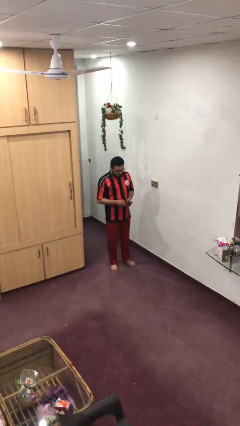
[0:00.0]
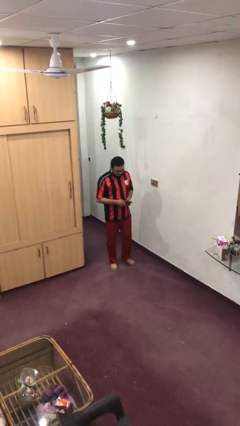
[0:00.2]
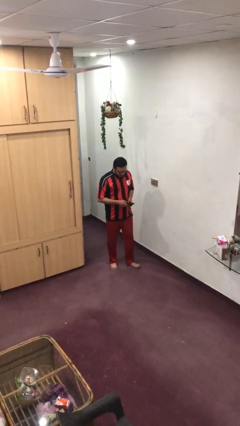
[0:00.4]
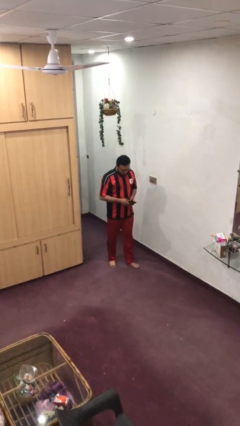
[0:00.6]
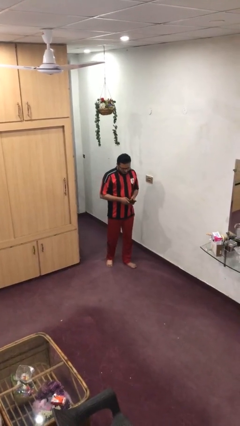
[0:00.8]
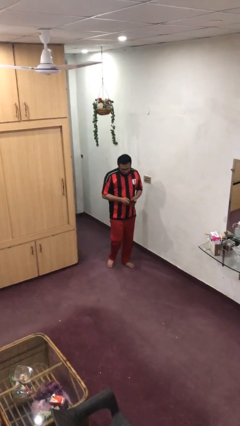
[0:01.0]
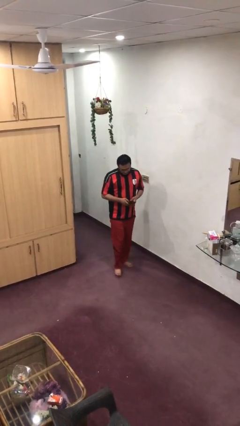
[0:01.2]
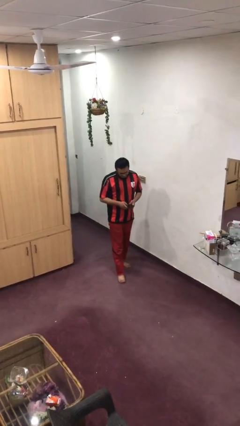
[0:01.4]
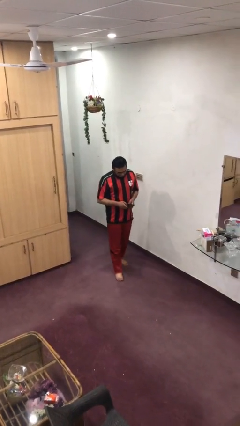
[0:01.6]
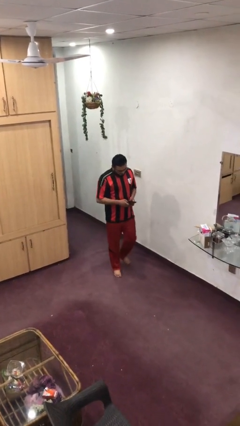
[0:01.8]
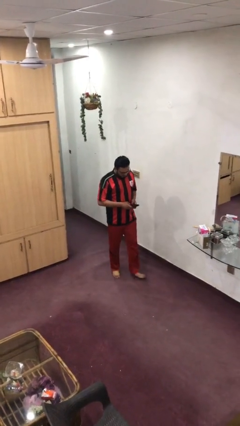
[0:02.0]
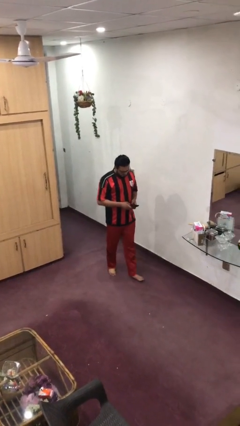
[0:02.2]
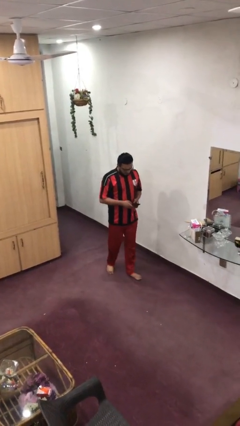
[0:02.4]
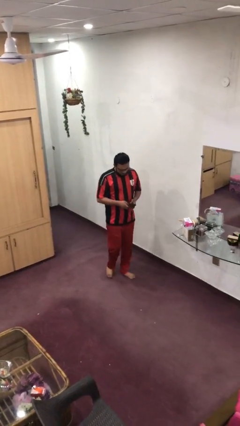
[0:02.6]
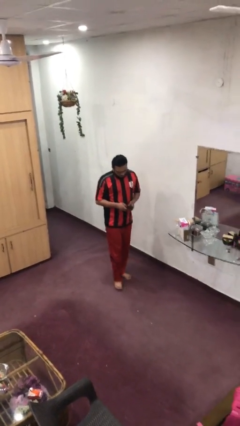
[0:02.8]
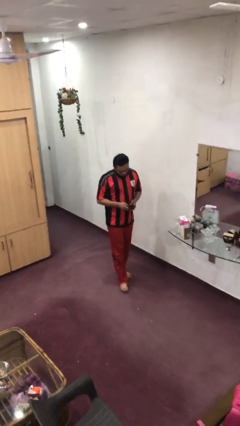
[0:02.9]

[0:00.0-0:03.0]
person texts on phone

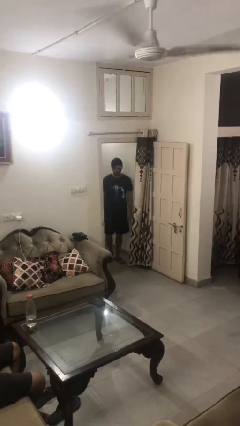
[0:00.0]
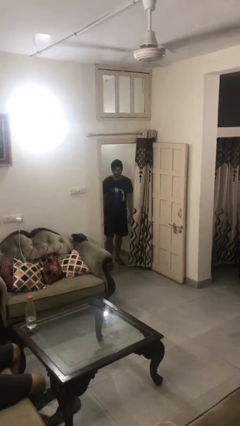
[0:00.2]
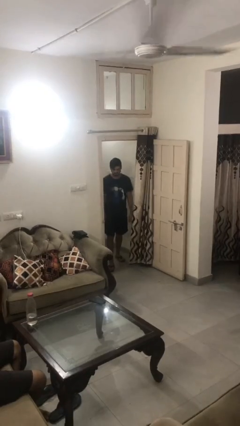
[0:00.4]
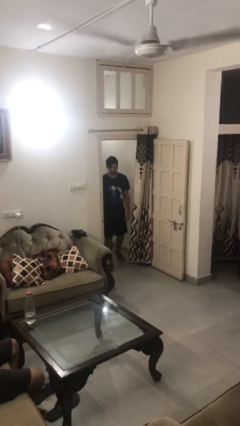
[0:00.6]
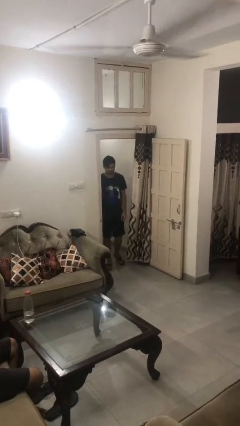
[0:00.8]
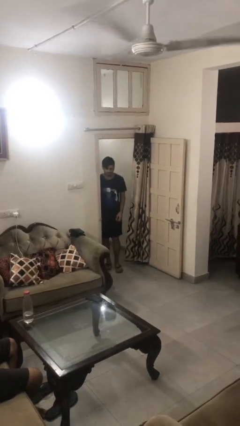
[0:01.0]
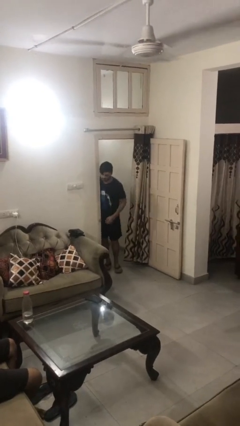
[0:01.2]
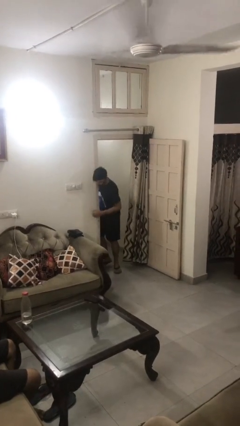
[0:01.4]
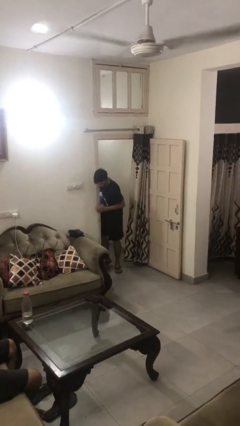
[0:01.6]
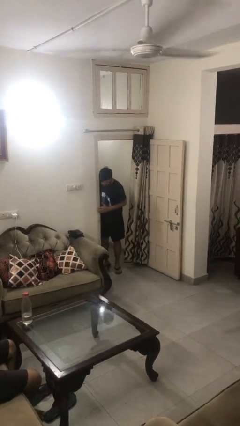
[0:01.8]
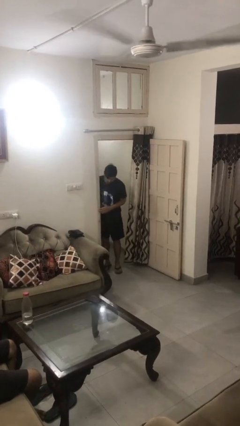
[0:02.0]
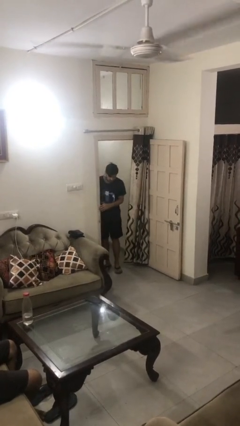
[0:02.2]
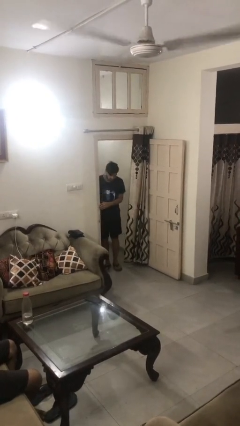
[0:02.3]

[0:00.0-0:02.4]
person bumps into wall

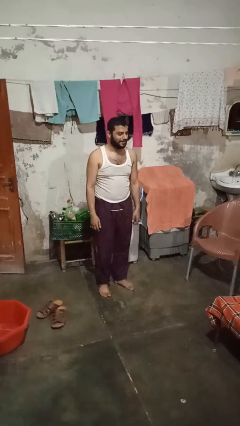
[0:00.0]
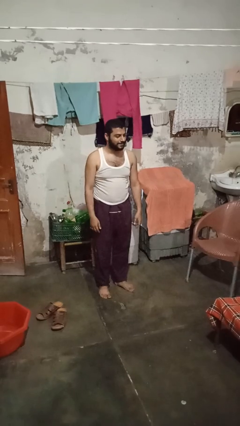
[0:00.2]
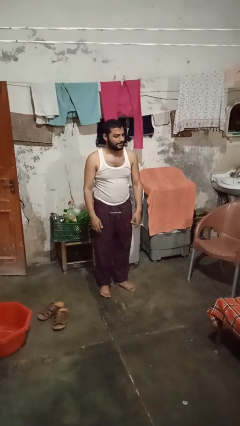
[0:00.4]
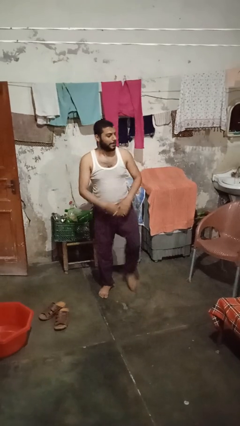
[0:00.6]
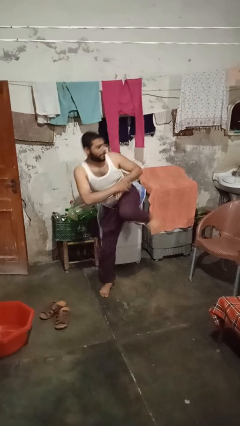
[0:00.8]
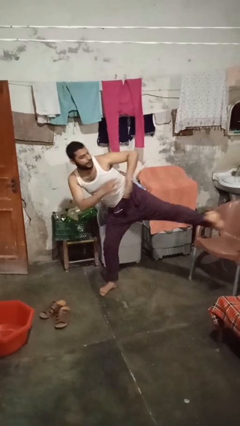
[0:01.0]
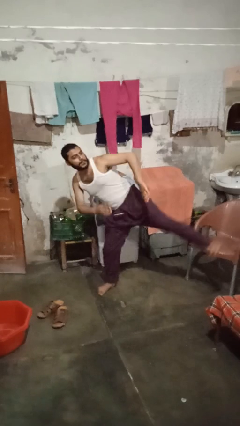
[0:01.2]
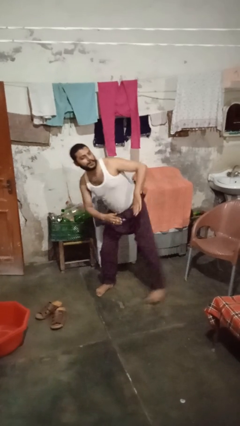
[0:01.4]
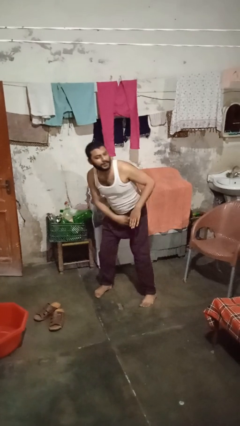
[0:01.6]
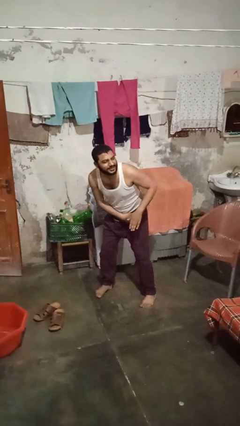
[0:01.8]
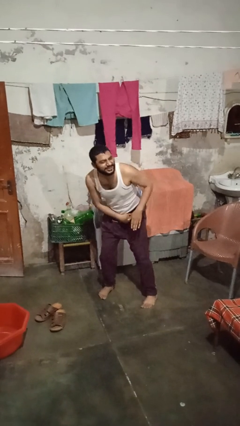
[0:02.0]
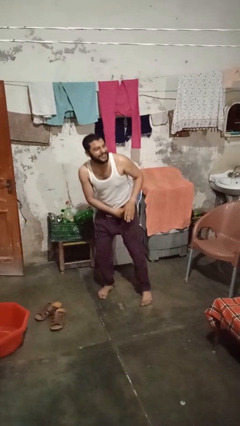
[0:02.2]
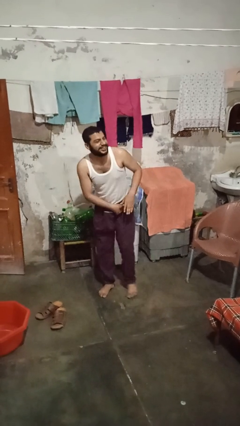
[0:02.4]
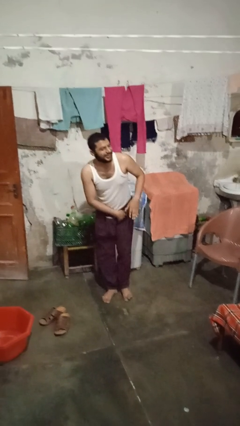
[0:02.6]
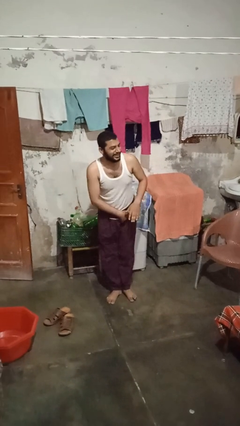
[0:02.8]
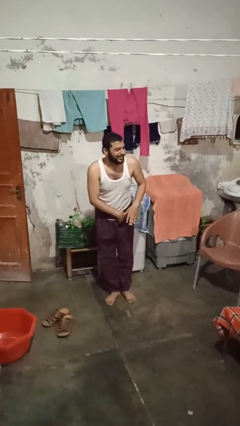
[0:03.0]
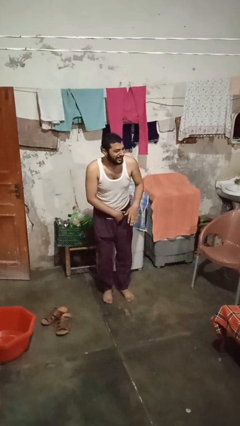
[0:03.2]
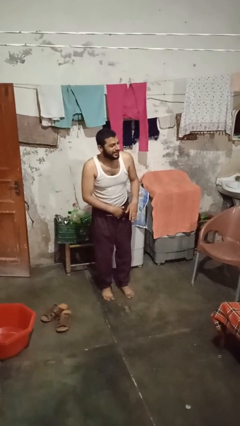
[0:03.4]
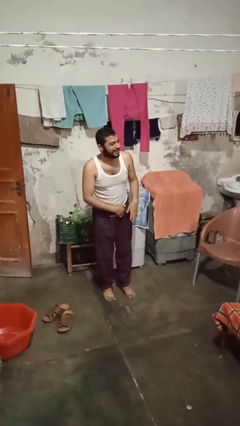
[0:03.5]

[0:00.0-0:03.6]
person karate kicks

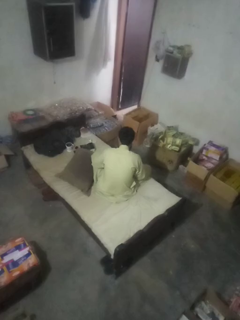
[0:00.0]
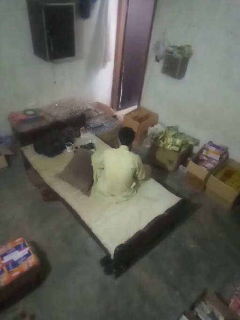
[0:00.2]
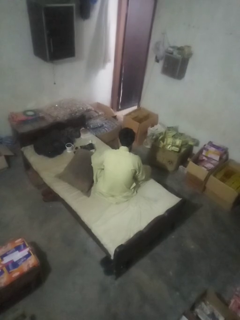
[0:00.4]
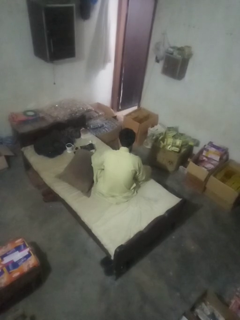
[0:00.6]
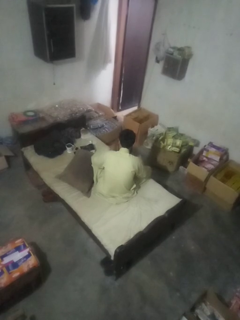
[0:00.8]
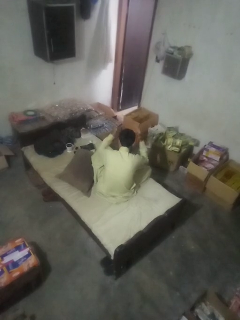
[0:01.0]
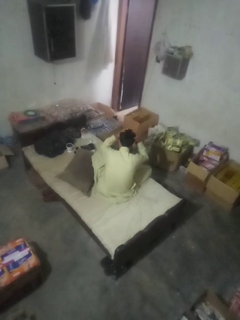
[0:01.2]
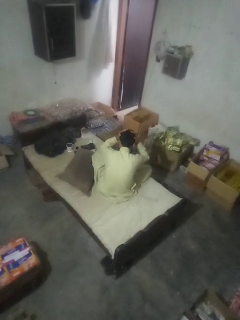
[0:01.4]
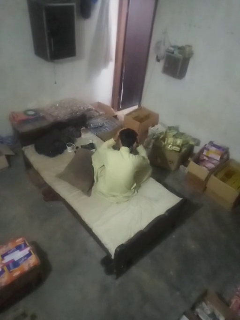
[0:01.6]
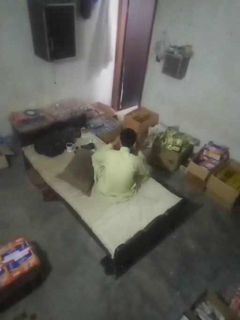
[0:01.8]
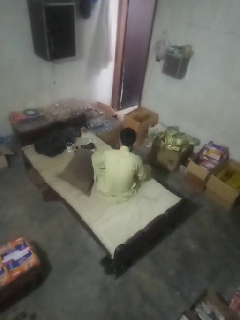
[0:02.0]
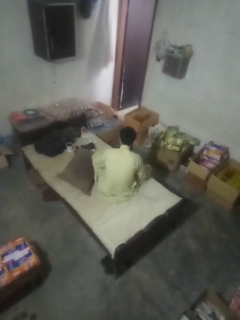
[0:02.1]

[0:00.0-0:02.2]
person pats head

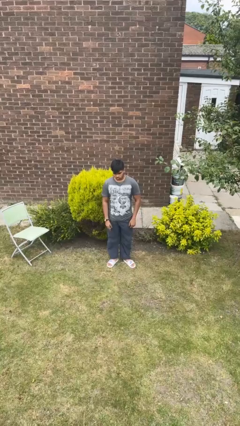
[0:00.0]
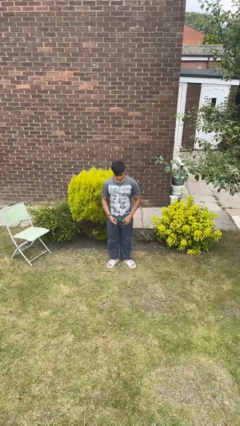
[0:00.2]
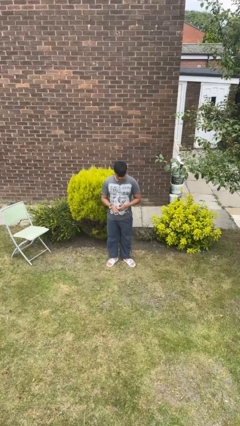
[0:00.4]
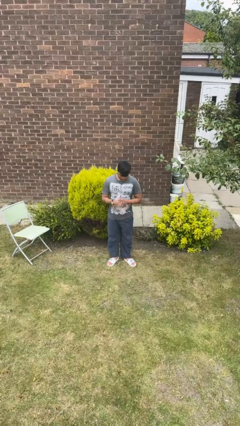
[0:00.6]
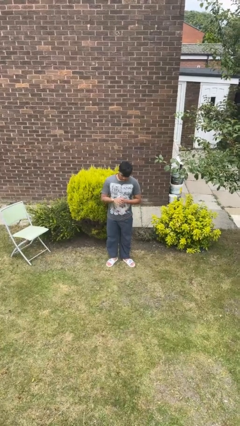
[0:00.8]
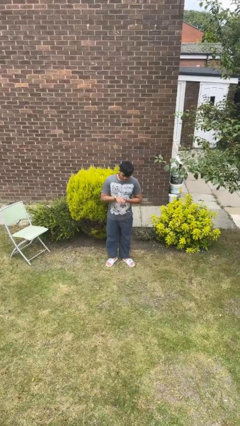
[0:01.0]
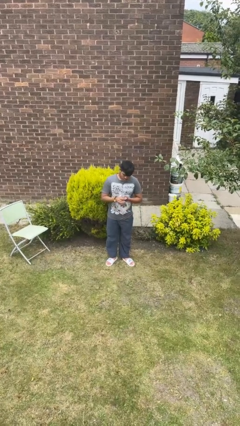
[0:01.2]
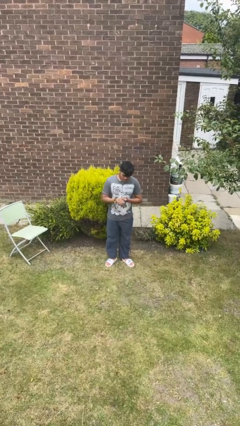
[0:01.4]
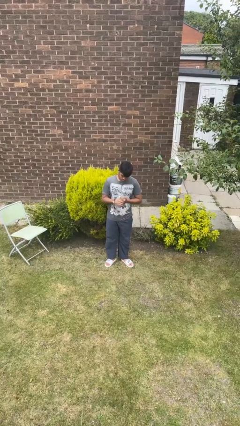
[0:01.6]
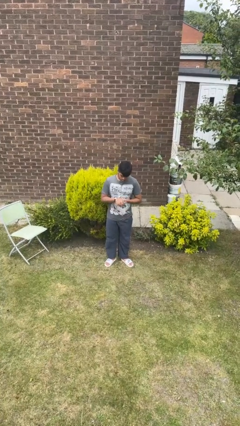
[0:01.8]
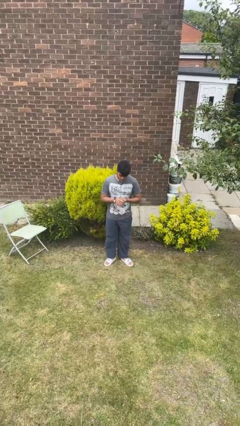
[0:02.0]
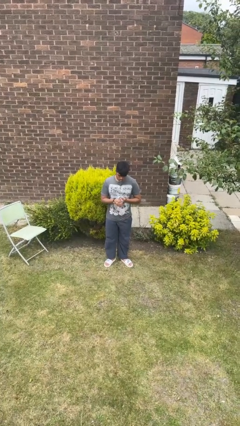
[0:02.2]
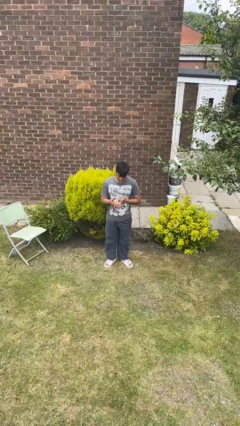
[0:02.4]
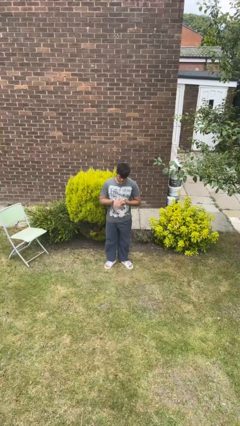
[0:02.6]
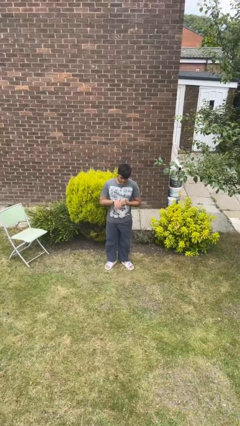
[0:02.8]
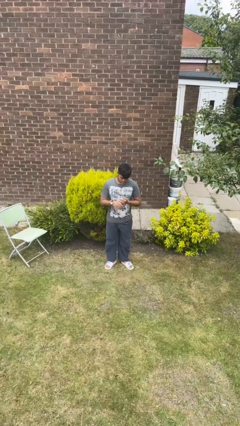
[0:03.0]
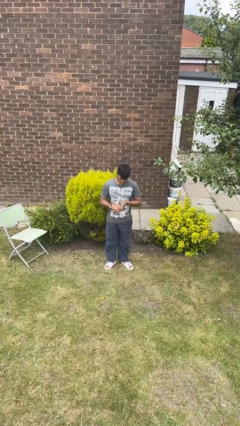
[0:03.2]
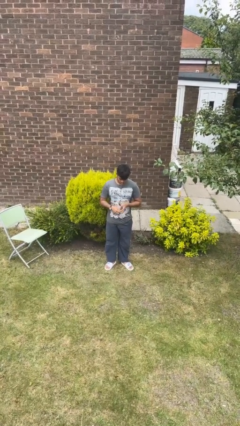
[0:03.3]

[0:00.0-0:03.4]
person cracks knuckles
